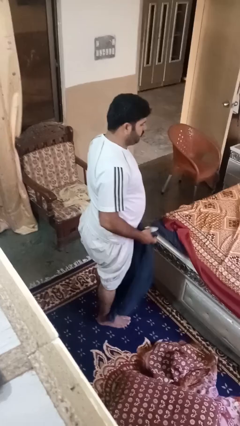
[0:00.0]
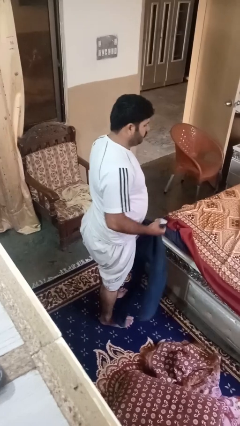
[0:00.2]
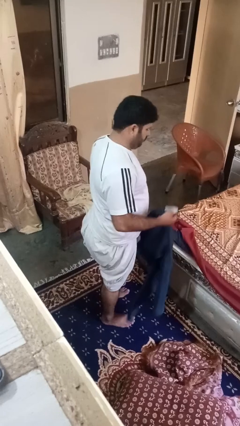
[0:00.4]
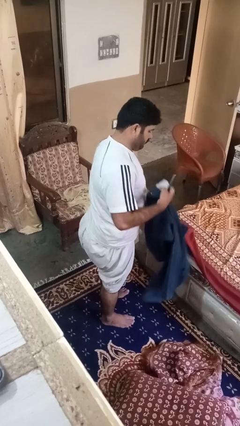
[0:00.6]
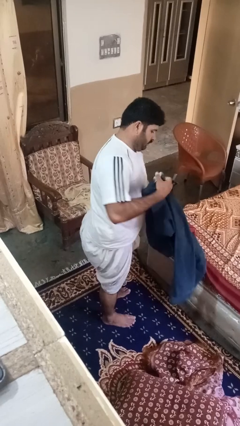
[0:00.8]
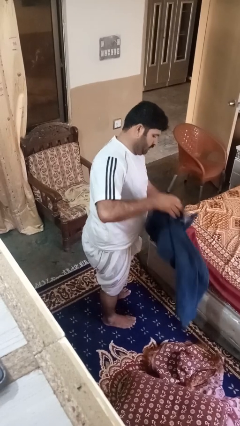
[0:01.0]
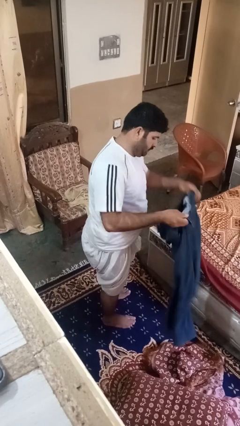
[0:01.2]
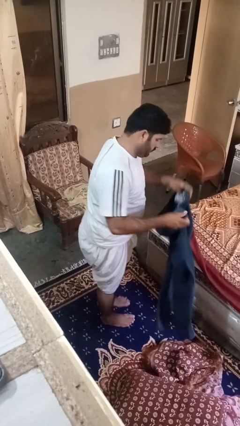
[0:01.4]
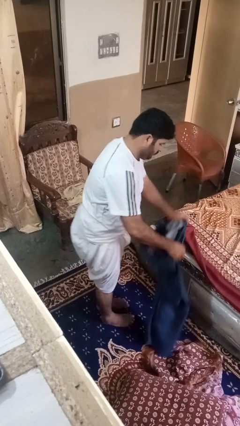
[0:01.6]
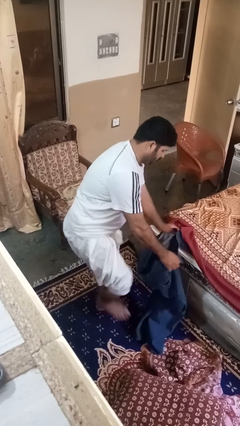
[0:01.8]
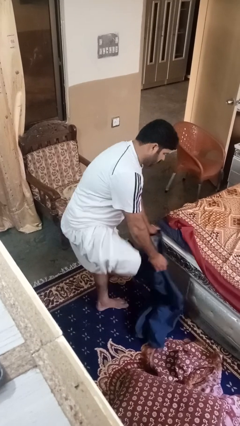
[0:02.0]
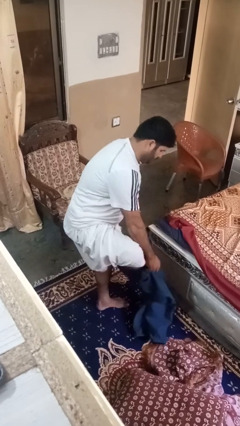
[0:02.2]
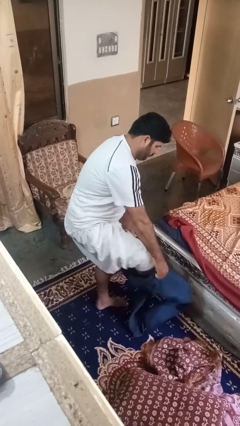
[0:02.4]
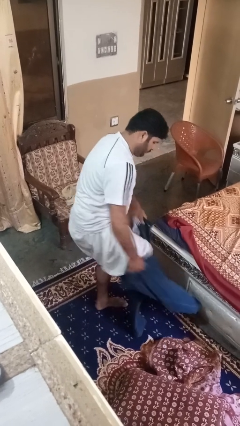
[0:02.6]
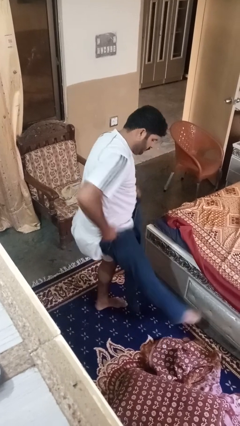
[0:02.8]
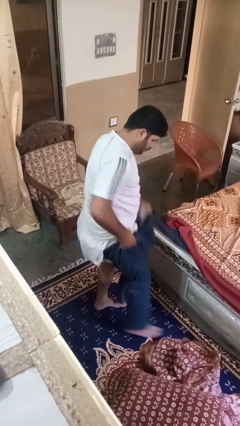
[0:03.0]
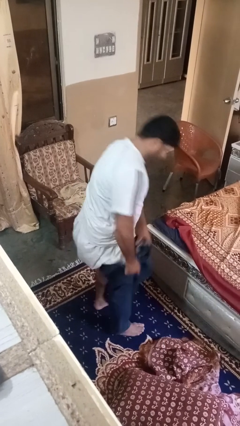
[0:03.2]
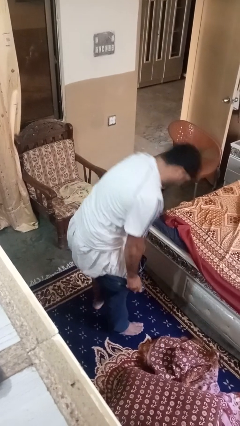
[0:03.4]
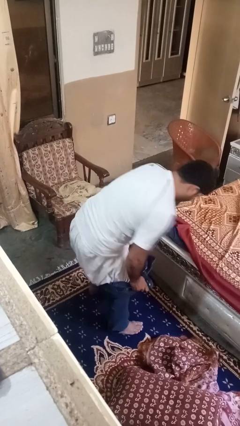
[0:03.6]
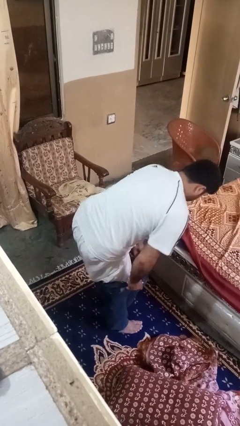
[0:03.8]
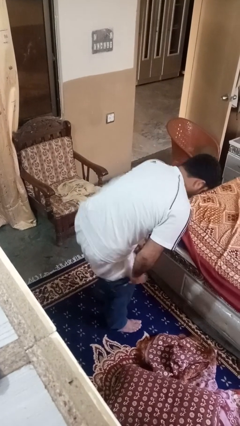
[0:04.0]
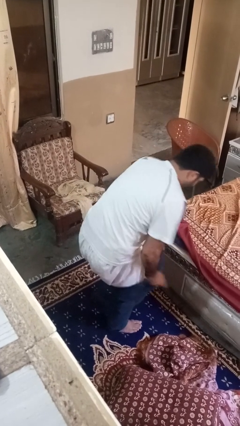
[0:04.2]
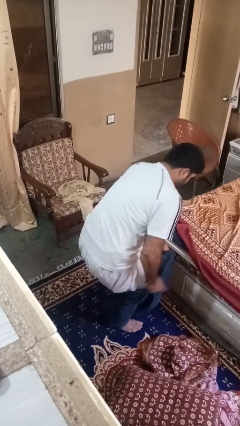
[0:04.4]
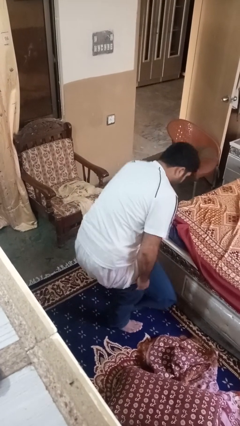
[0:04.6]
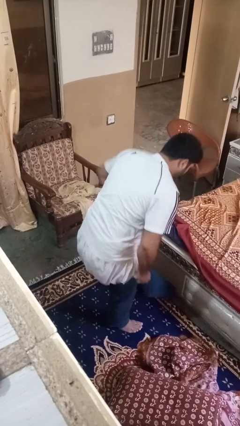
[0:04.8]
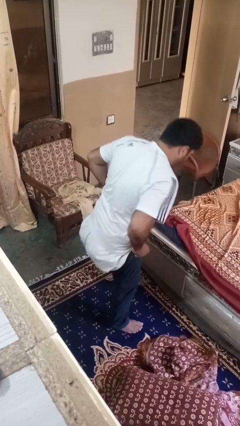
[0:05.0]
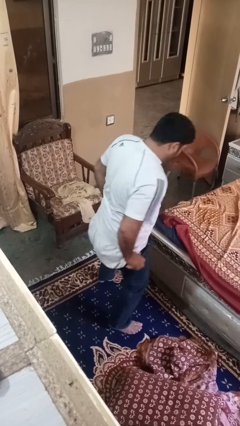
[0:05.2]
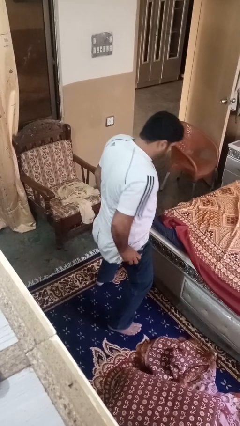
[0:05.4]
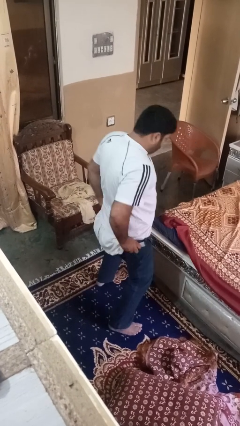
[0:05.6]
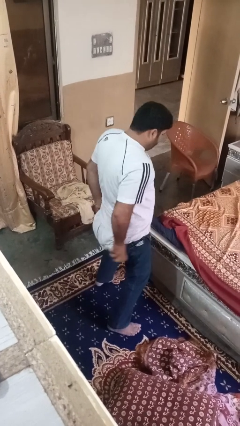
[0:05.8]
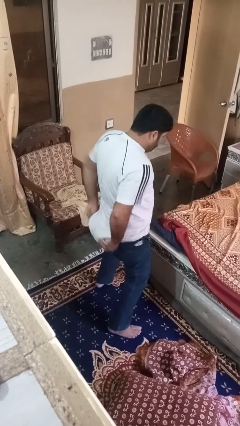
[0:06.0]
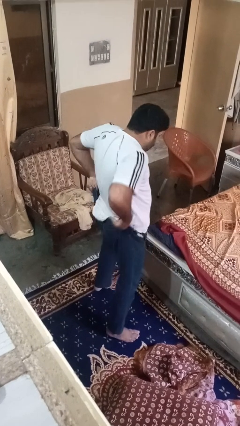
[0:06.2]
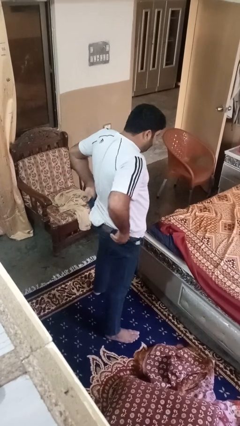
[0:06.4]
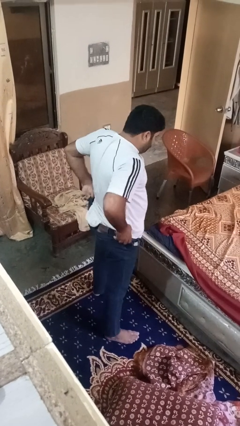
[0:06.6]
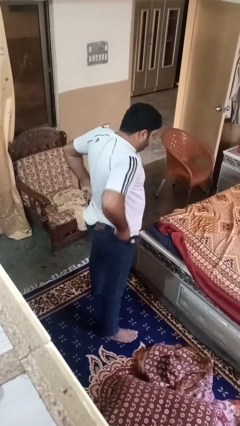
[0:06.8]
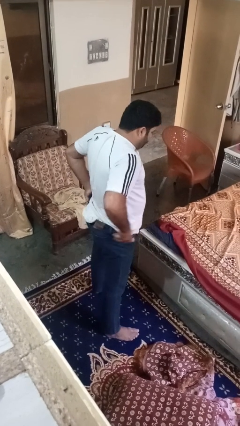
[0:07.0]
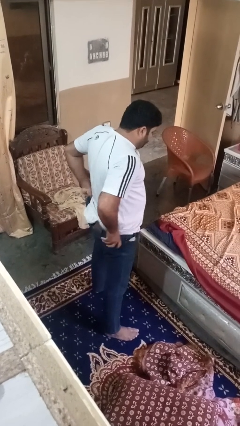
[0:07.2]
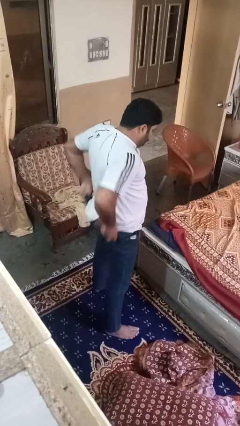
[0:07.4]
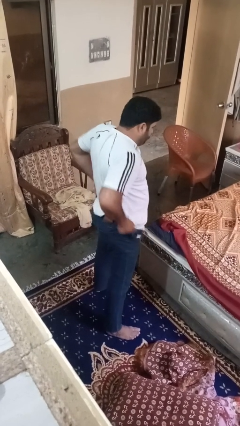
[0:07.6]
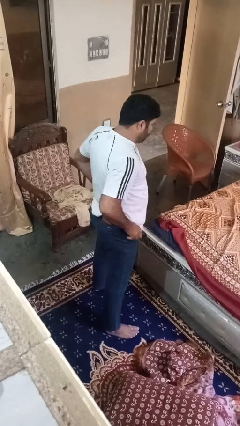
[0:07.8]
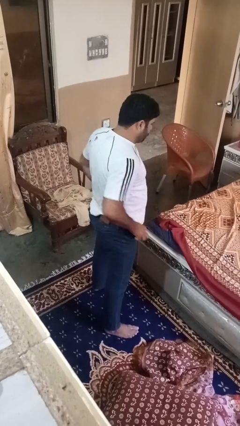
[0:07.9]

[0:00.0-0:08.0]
person puts on pants

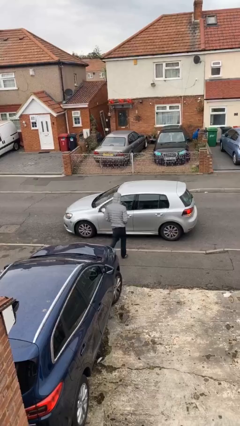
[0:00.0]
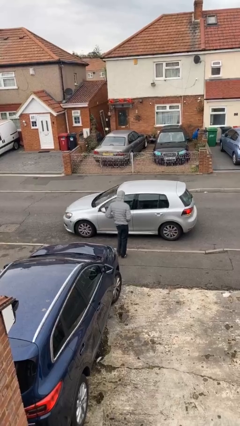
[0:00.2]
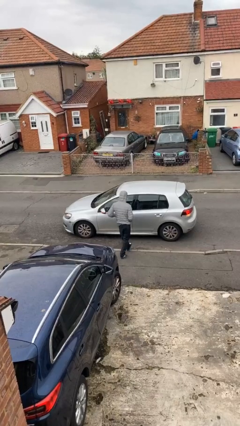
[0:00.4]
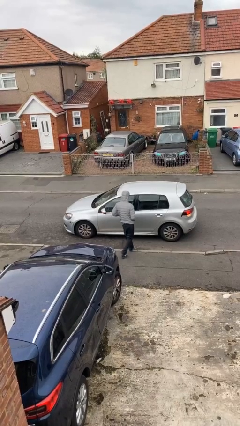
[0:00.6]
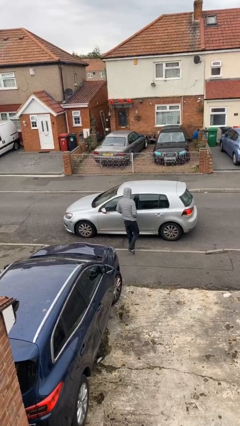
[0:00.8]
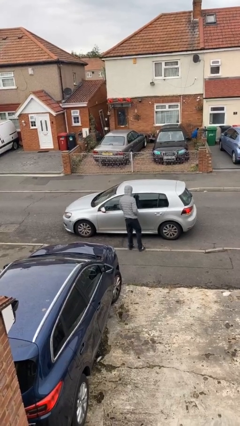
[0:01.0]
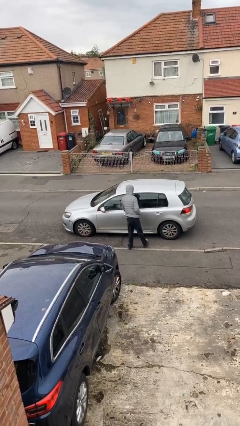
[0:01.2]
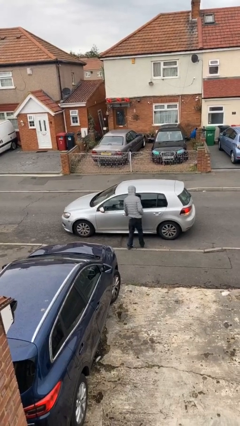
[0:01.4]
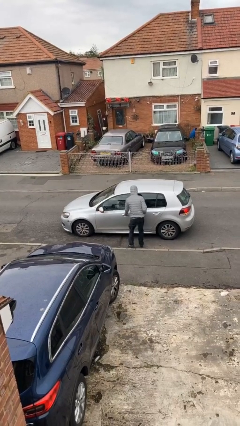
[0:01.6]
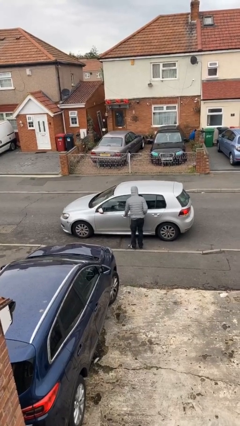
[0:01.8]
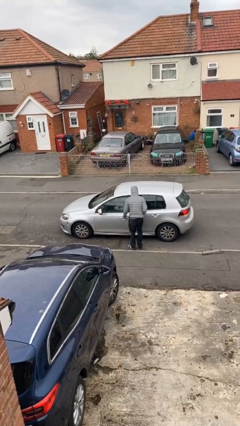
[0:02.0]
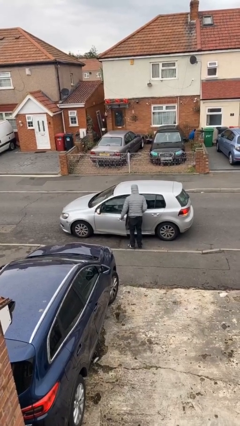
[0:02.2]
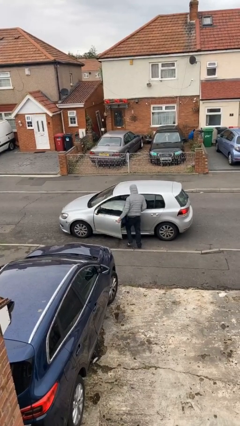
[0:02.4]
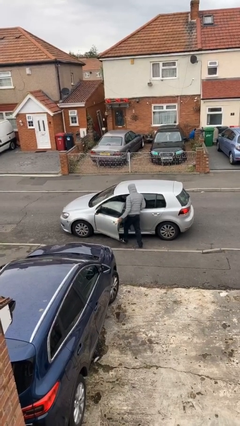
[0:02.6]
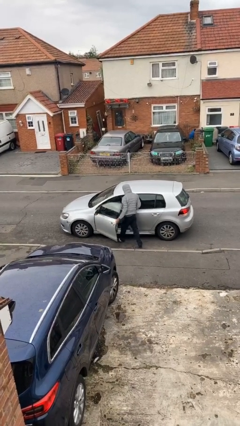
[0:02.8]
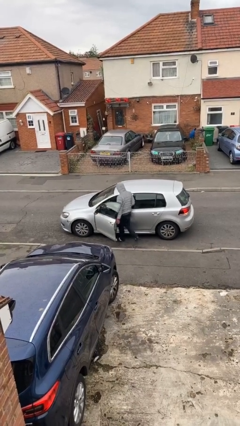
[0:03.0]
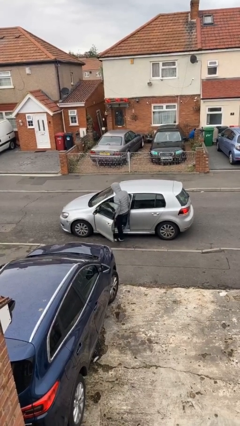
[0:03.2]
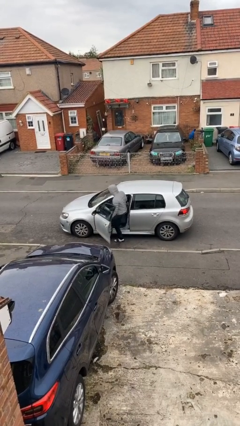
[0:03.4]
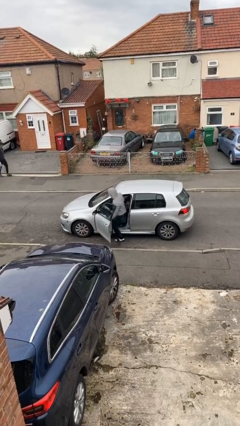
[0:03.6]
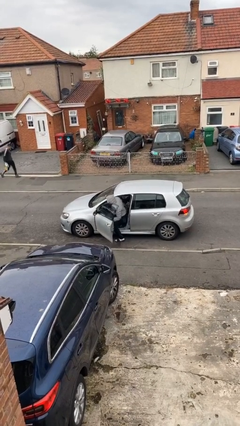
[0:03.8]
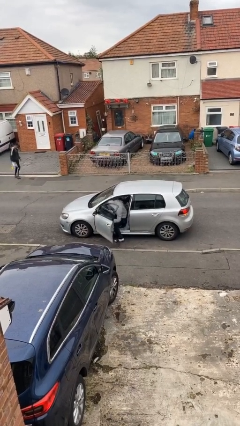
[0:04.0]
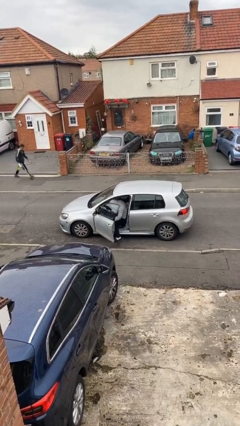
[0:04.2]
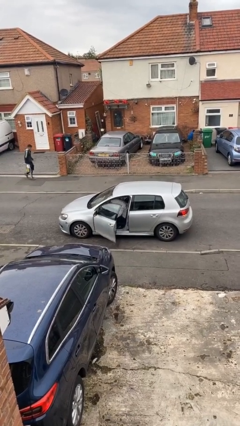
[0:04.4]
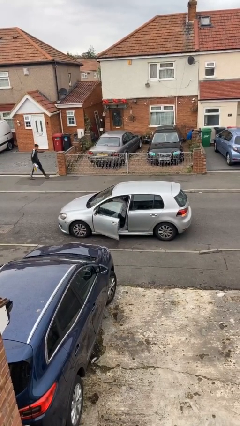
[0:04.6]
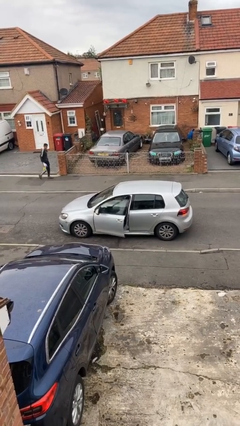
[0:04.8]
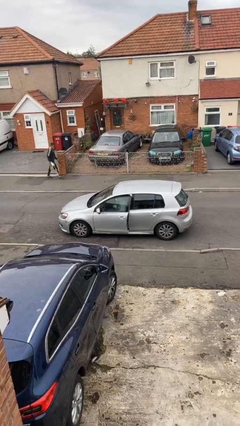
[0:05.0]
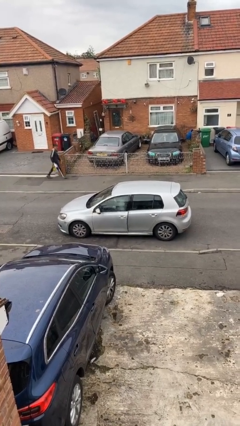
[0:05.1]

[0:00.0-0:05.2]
car picks up person

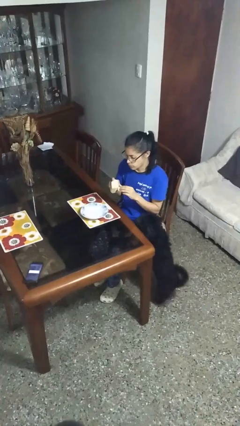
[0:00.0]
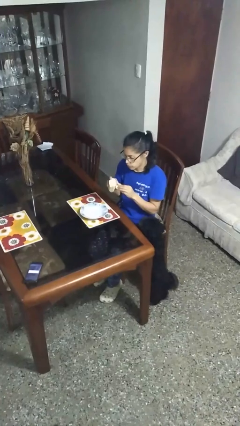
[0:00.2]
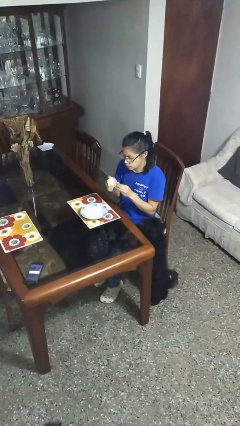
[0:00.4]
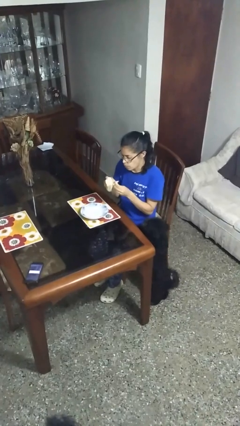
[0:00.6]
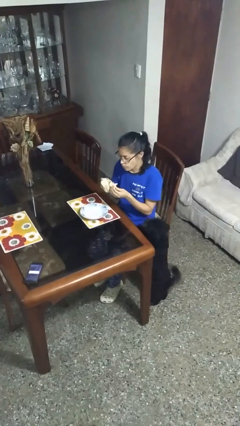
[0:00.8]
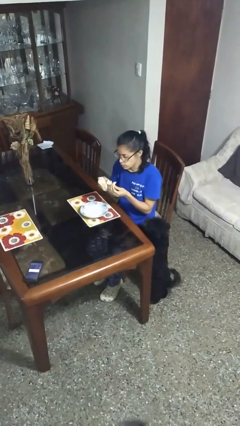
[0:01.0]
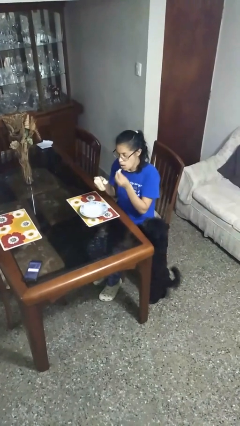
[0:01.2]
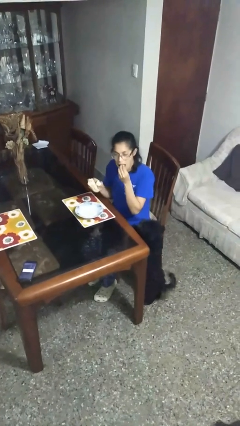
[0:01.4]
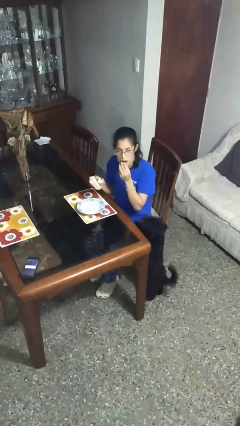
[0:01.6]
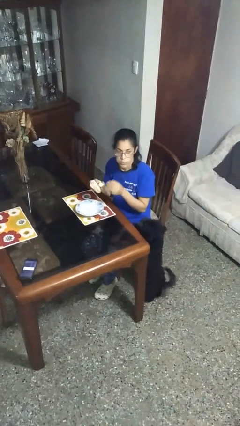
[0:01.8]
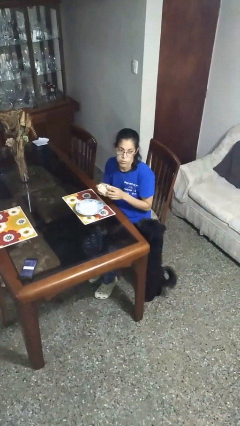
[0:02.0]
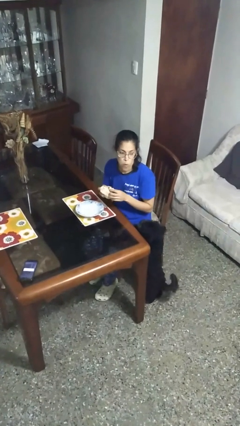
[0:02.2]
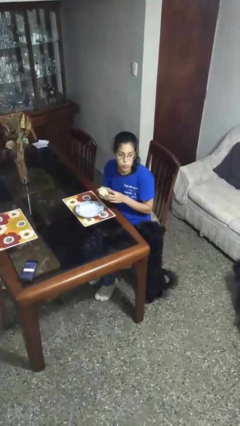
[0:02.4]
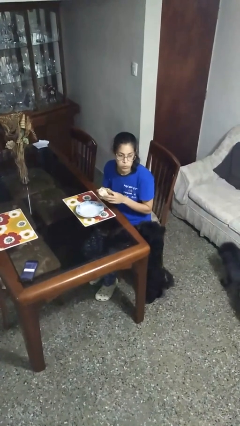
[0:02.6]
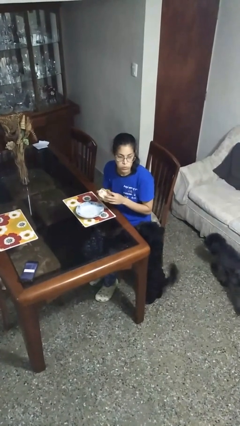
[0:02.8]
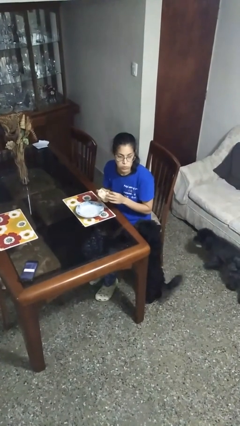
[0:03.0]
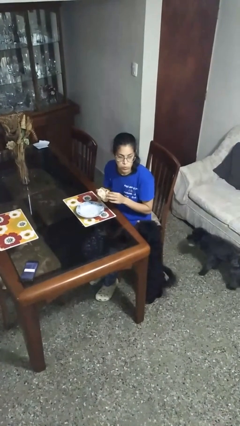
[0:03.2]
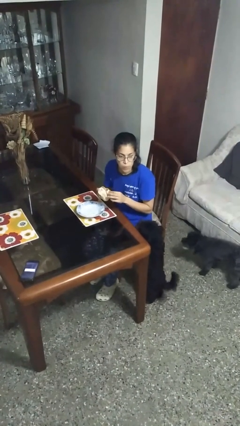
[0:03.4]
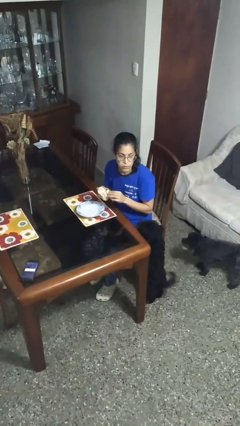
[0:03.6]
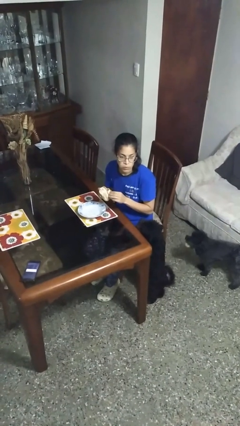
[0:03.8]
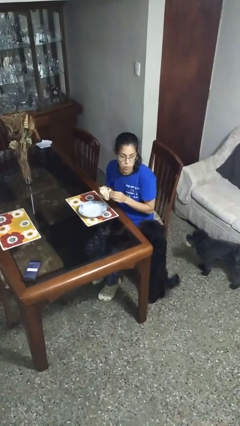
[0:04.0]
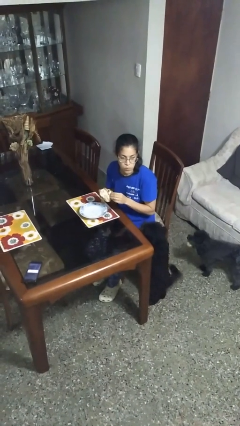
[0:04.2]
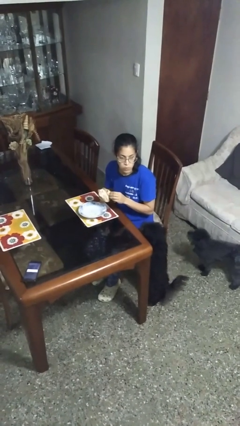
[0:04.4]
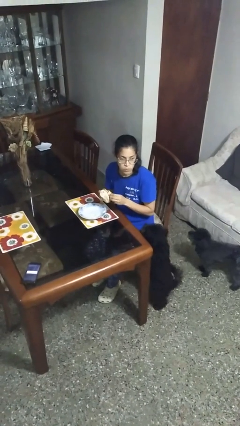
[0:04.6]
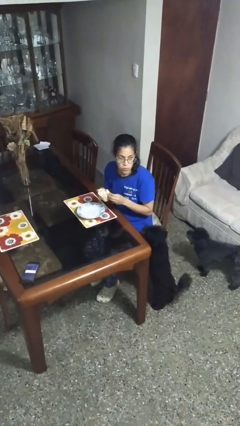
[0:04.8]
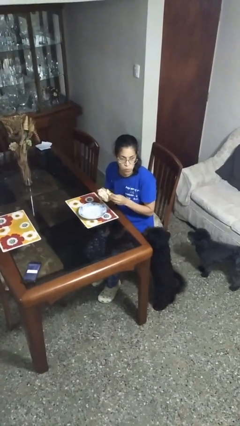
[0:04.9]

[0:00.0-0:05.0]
person eats with hands
